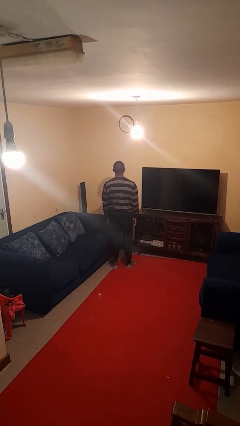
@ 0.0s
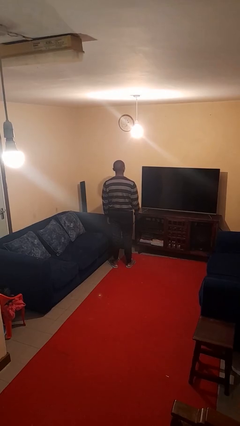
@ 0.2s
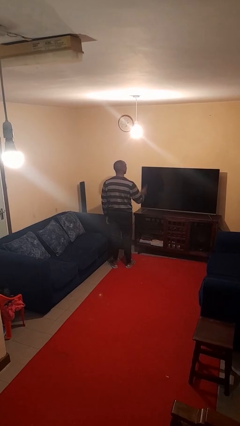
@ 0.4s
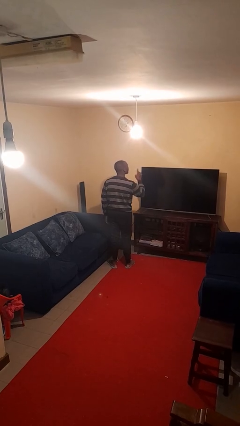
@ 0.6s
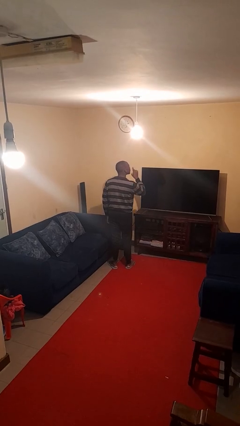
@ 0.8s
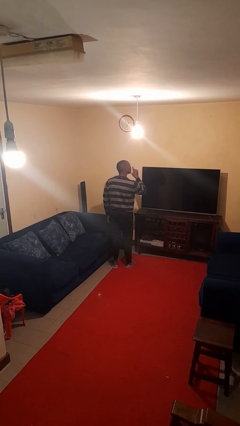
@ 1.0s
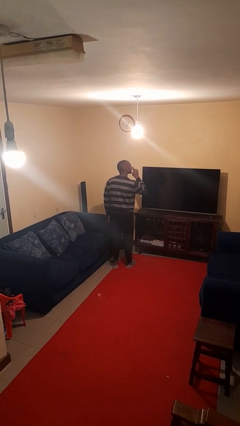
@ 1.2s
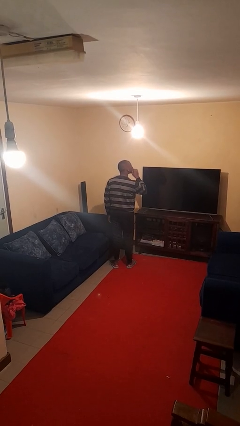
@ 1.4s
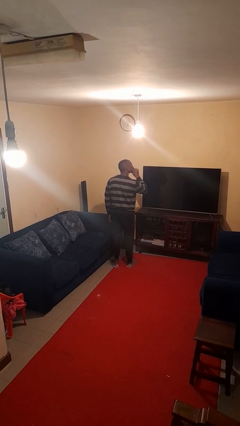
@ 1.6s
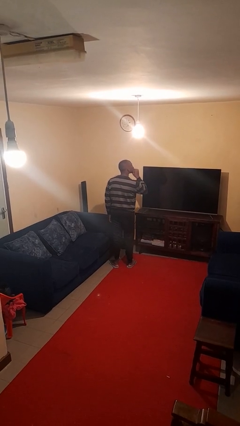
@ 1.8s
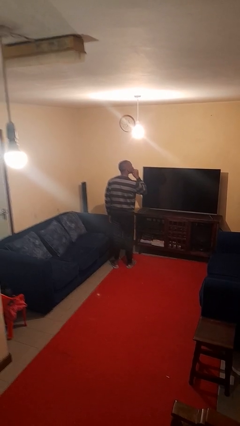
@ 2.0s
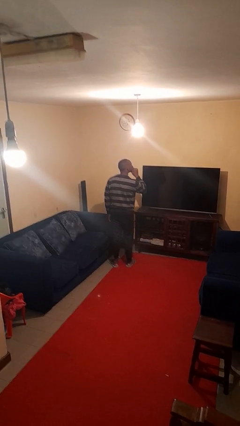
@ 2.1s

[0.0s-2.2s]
person gestures be quiet

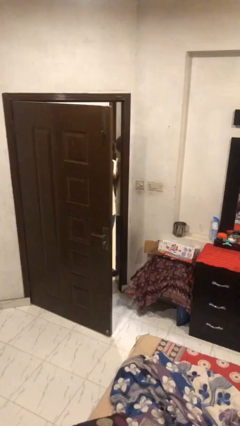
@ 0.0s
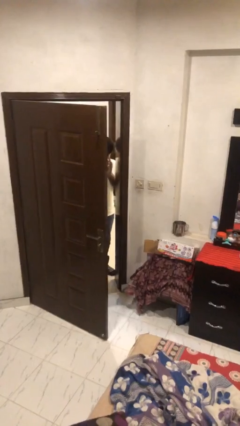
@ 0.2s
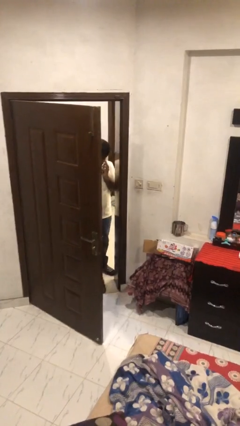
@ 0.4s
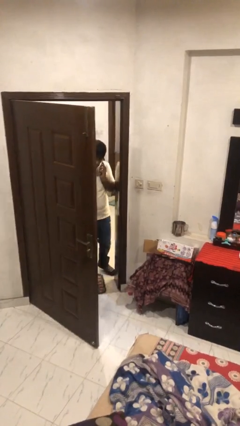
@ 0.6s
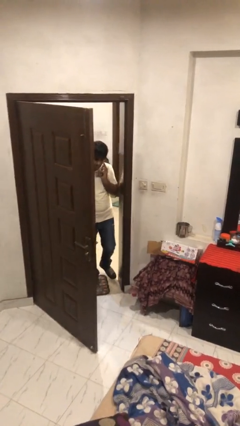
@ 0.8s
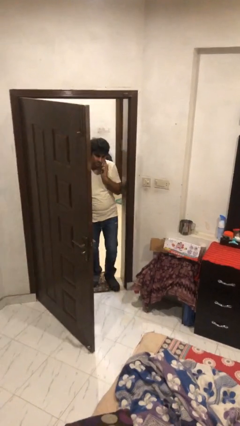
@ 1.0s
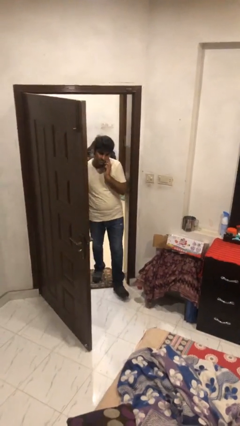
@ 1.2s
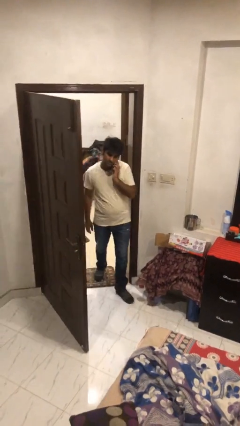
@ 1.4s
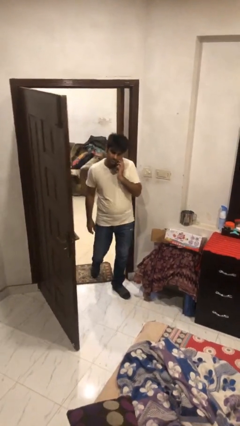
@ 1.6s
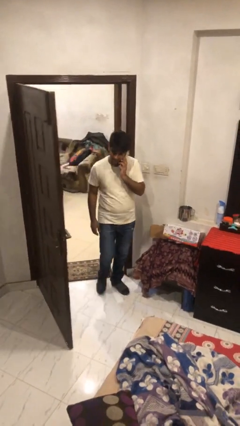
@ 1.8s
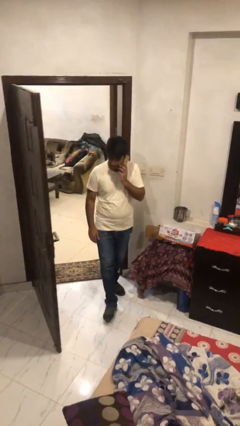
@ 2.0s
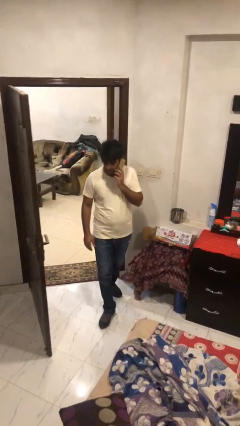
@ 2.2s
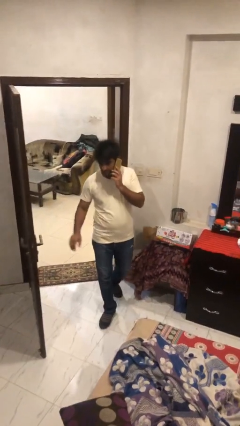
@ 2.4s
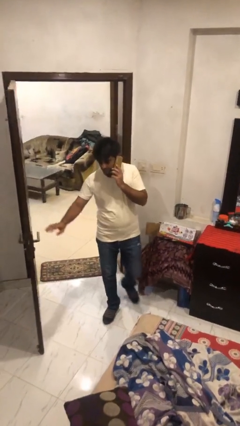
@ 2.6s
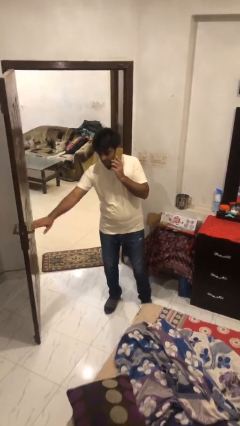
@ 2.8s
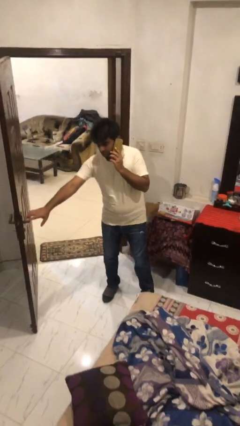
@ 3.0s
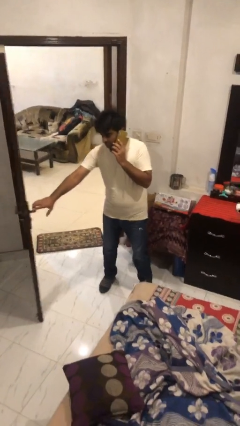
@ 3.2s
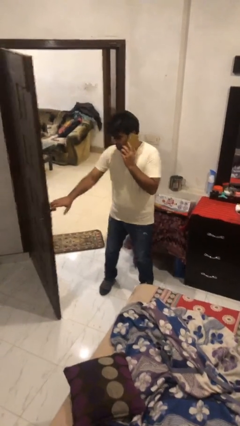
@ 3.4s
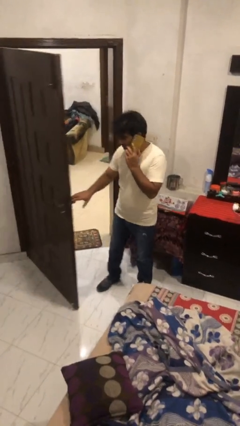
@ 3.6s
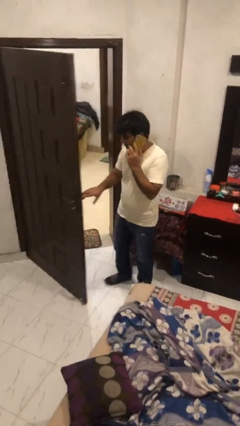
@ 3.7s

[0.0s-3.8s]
person enters scene through structure

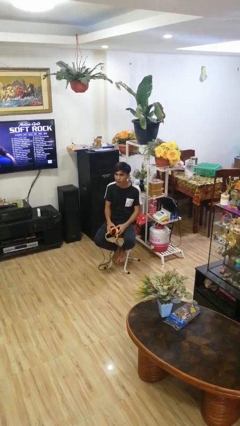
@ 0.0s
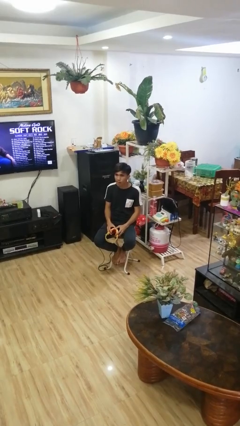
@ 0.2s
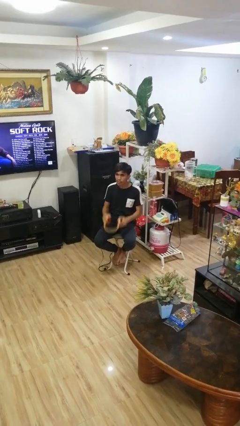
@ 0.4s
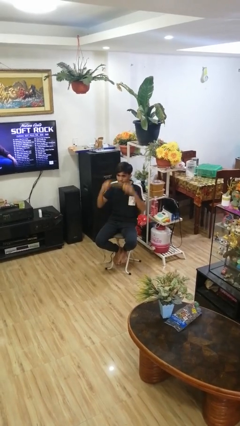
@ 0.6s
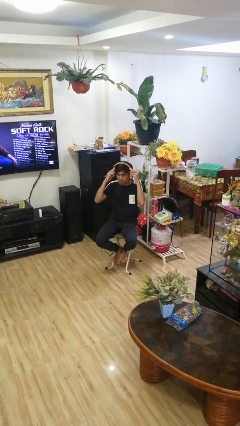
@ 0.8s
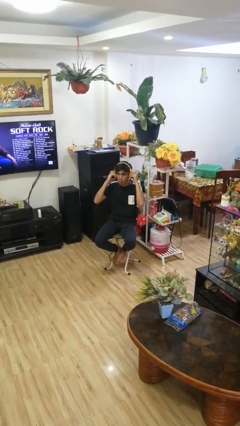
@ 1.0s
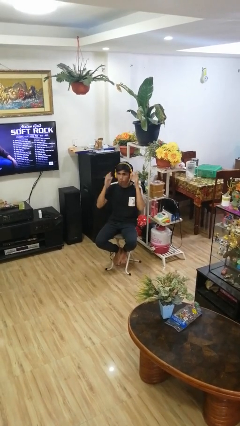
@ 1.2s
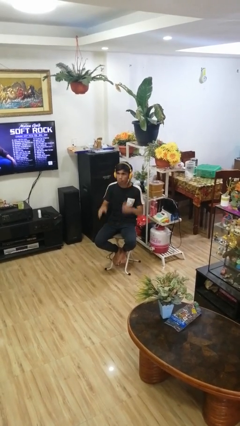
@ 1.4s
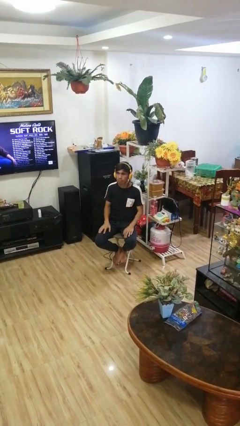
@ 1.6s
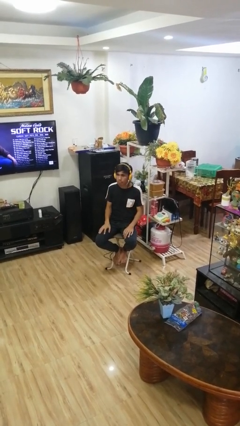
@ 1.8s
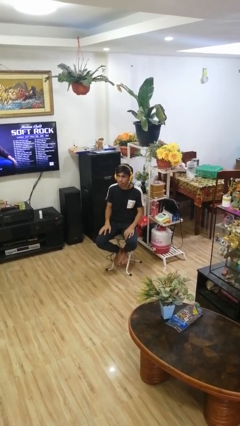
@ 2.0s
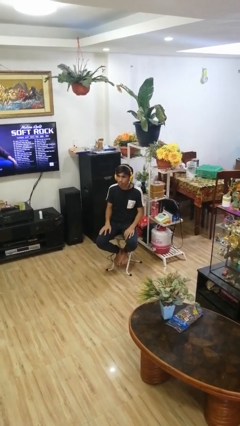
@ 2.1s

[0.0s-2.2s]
person puts on headphones

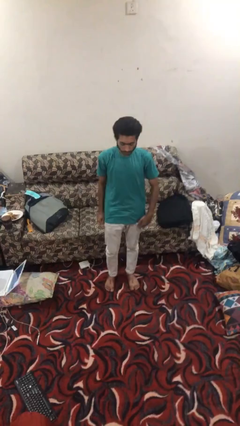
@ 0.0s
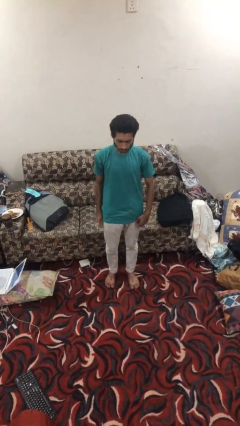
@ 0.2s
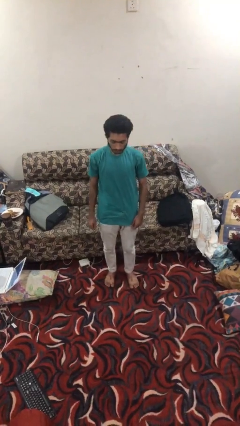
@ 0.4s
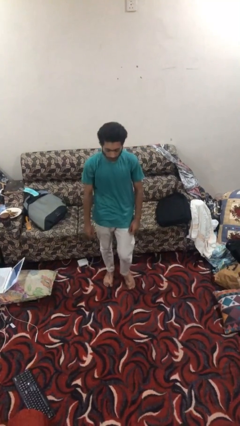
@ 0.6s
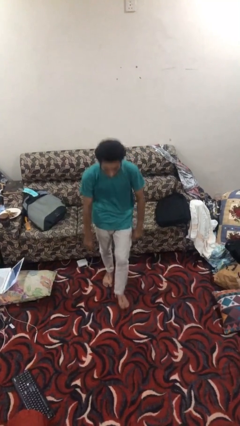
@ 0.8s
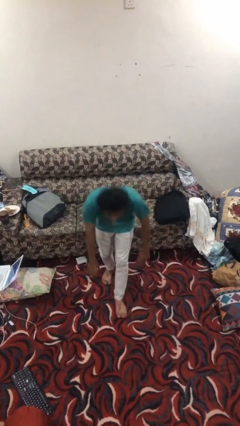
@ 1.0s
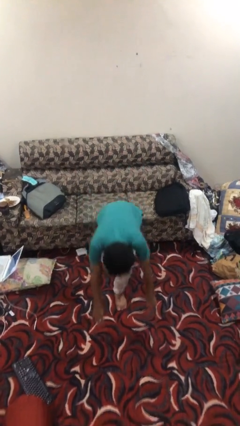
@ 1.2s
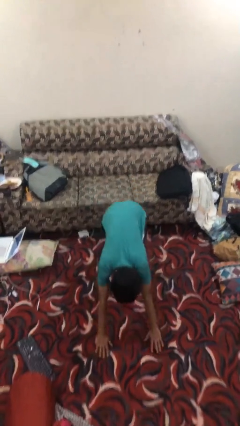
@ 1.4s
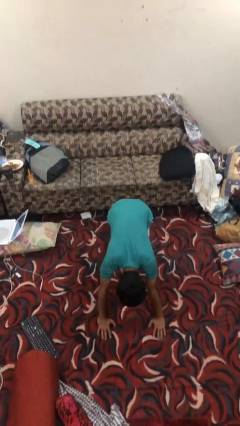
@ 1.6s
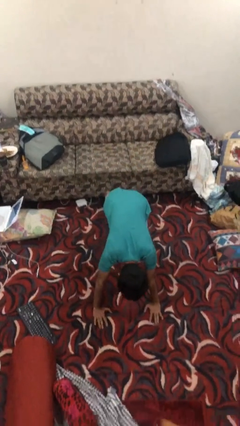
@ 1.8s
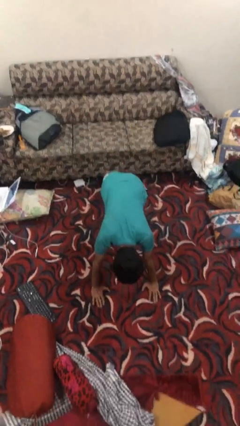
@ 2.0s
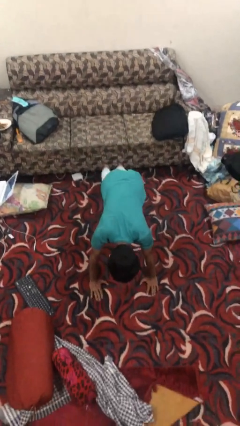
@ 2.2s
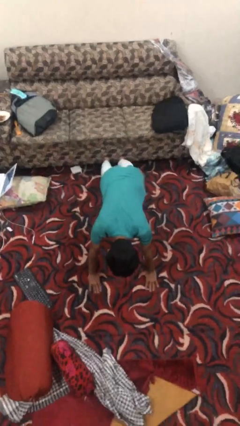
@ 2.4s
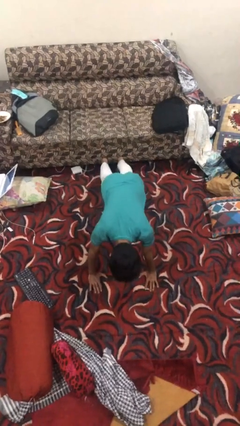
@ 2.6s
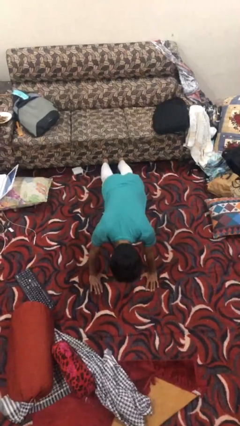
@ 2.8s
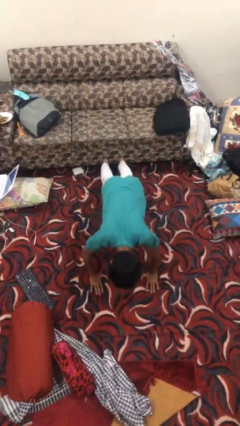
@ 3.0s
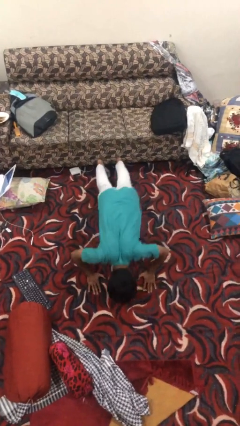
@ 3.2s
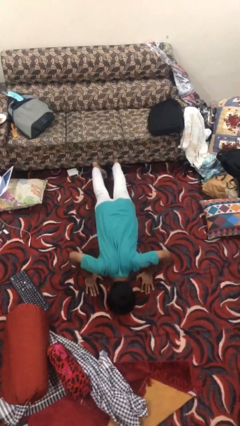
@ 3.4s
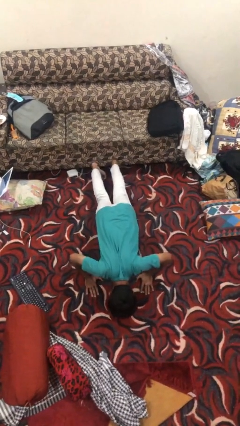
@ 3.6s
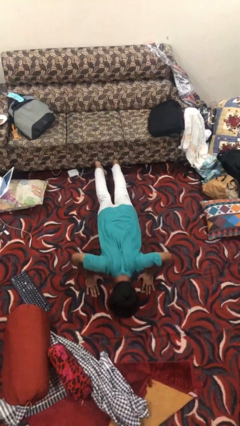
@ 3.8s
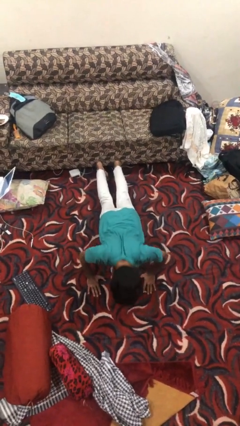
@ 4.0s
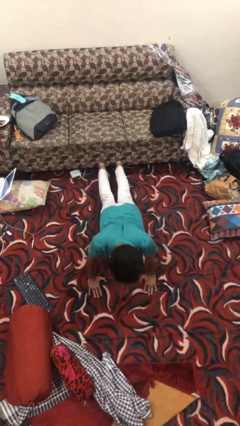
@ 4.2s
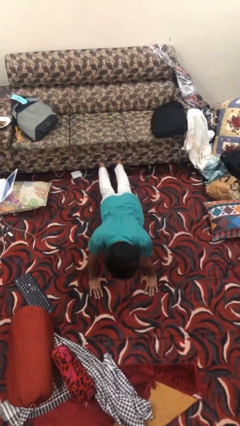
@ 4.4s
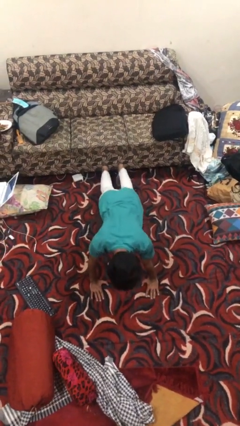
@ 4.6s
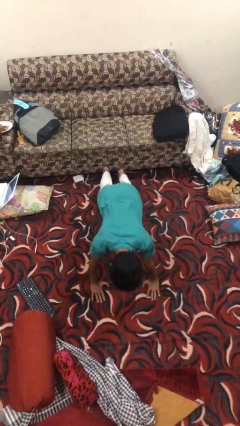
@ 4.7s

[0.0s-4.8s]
person exercises with pushup

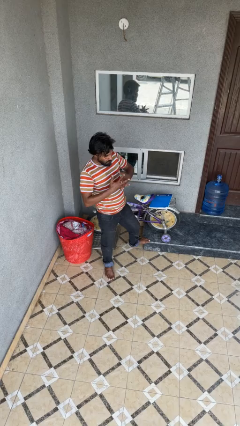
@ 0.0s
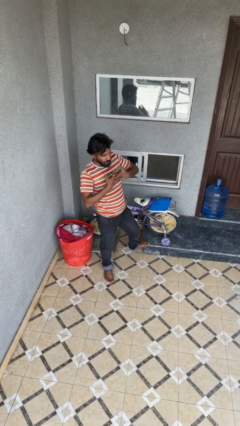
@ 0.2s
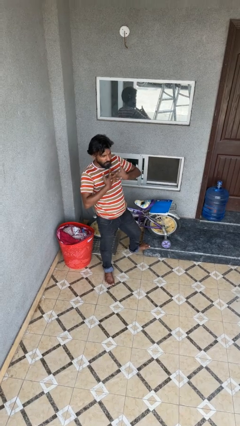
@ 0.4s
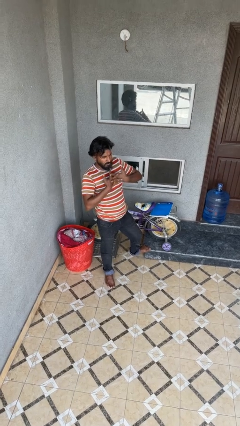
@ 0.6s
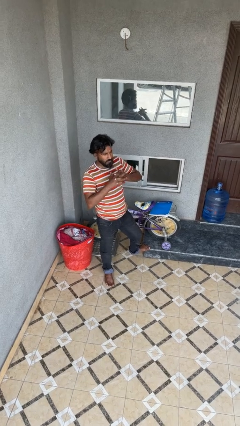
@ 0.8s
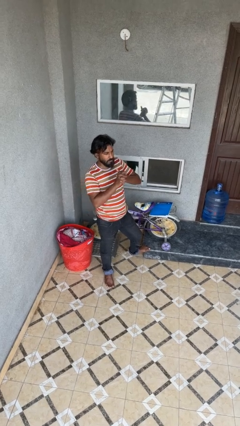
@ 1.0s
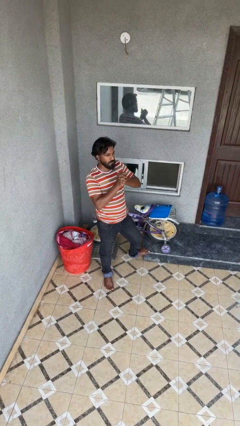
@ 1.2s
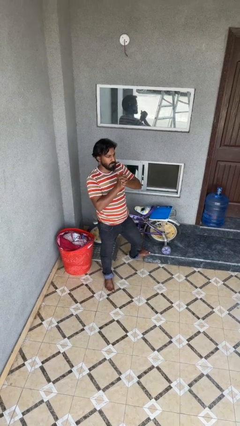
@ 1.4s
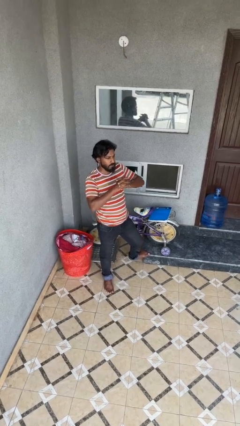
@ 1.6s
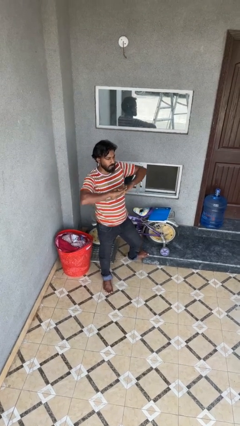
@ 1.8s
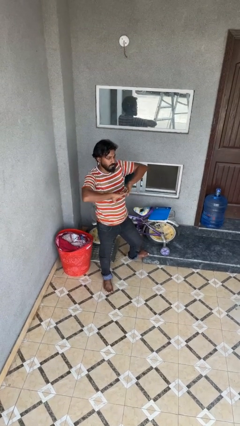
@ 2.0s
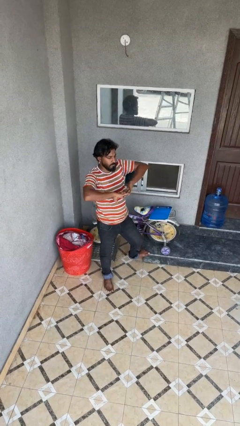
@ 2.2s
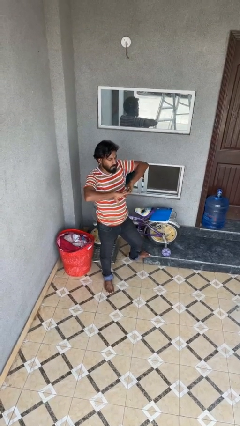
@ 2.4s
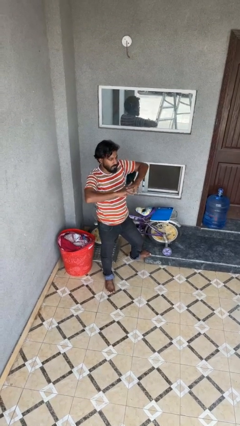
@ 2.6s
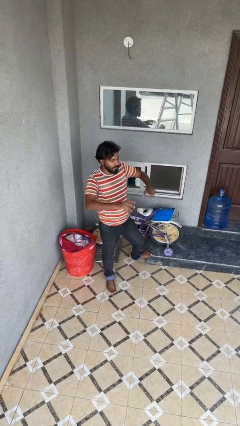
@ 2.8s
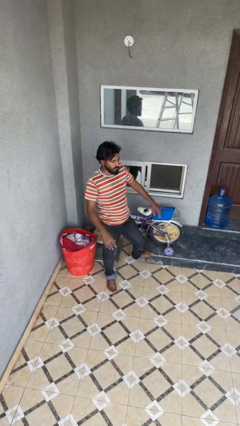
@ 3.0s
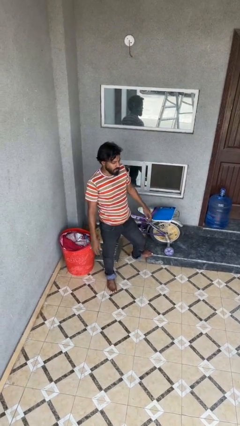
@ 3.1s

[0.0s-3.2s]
person cracks knuckles

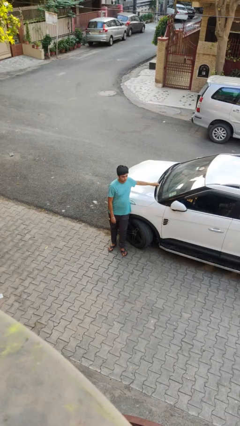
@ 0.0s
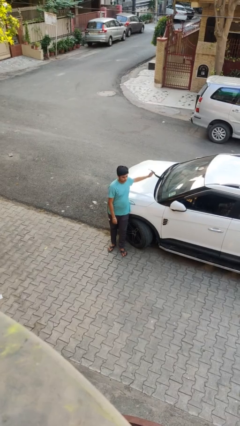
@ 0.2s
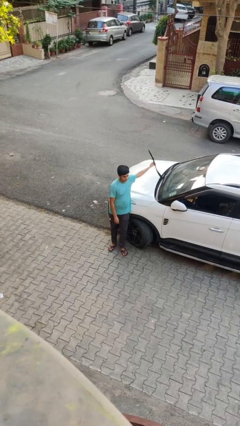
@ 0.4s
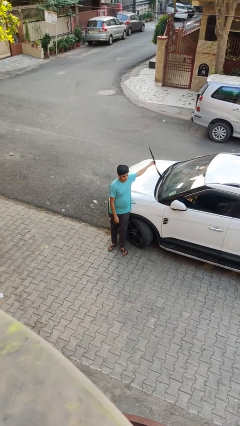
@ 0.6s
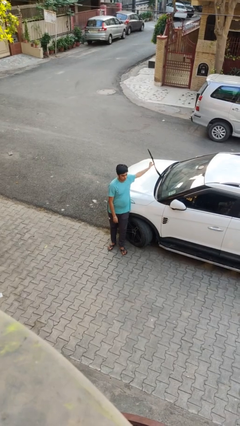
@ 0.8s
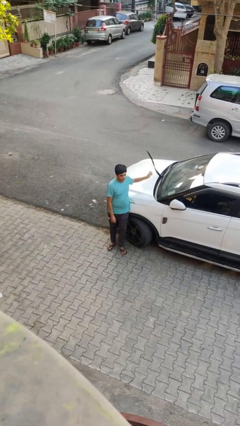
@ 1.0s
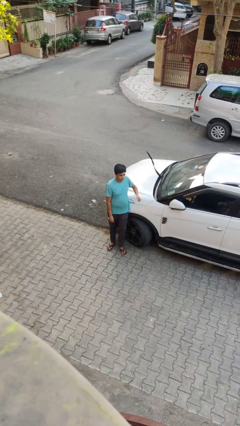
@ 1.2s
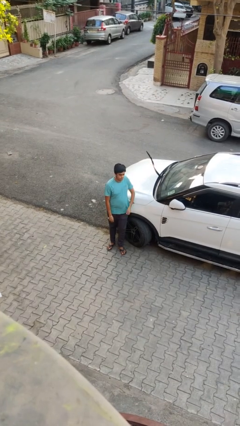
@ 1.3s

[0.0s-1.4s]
person flips up car wipers
